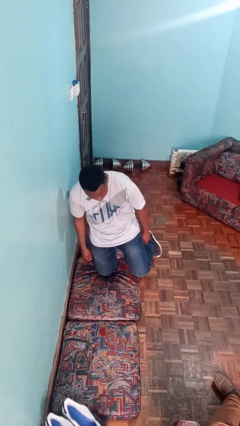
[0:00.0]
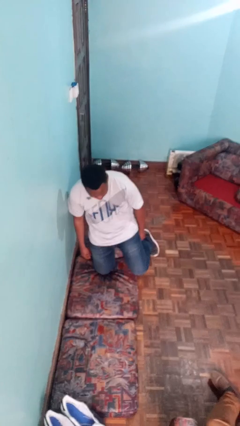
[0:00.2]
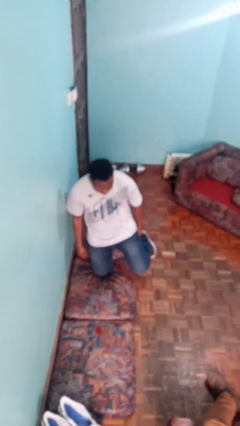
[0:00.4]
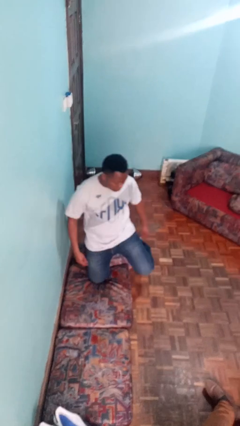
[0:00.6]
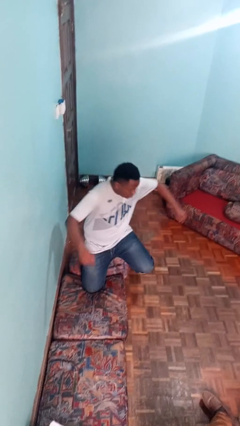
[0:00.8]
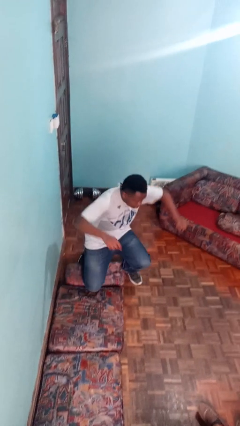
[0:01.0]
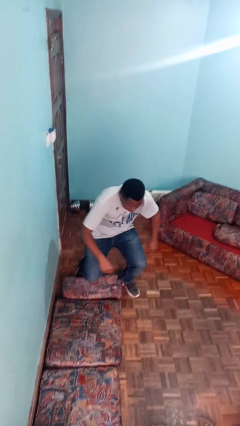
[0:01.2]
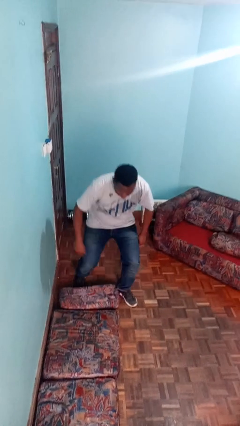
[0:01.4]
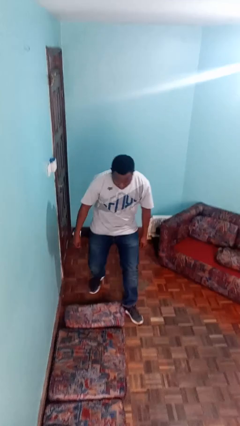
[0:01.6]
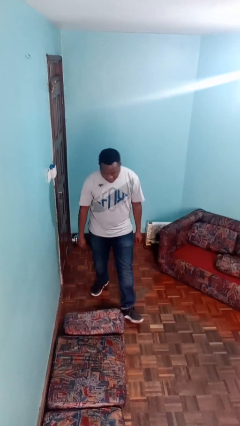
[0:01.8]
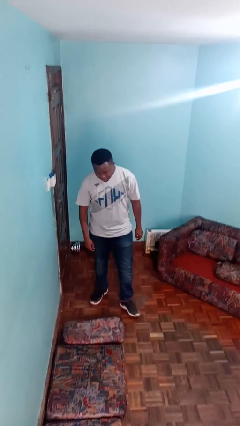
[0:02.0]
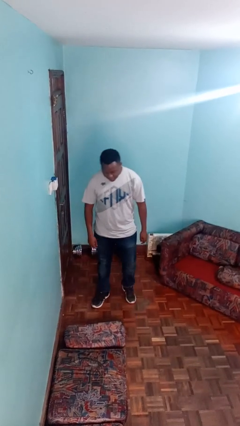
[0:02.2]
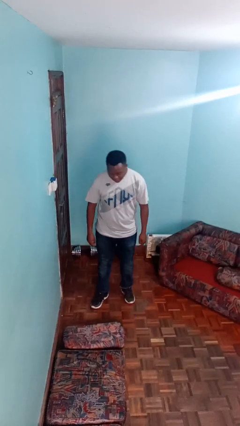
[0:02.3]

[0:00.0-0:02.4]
person stands up from floor

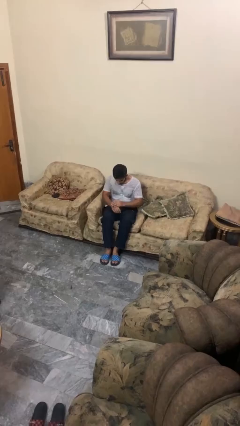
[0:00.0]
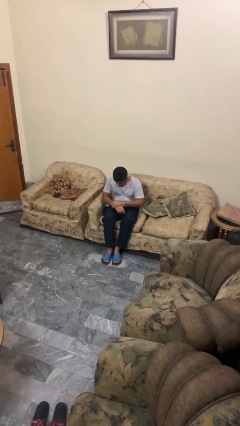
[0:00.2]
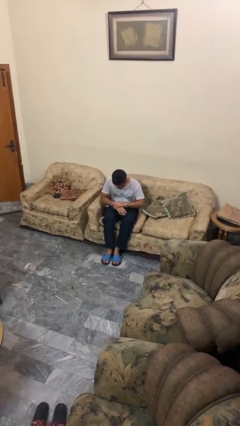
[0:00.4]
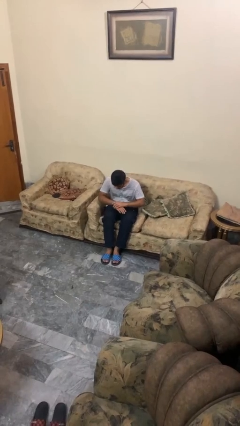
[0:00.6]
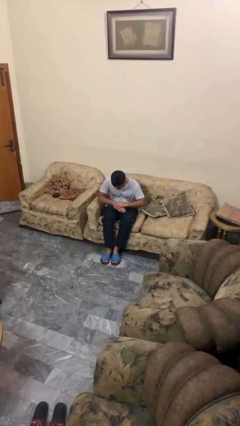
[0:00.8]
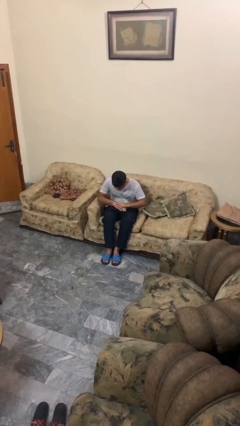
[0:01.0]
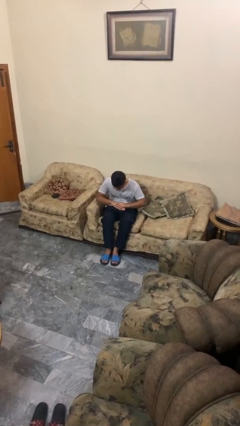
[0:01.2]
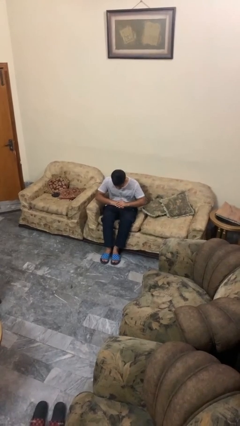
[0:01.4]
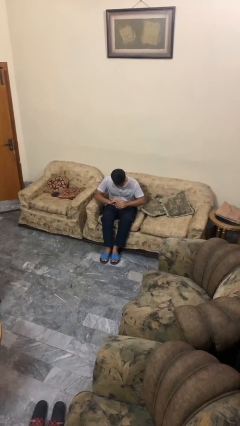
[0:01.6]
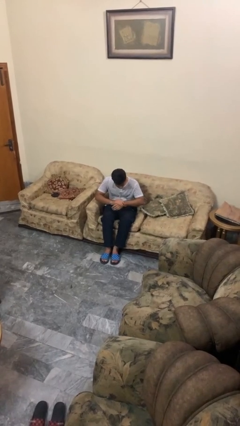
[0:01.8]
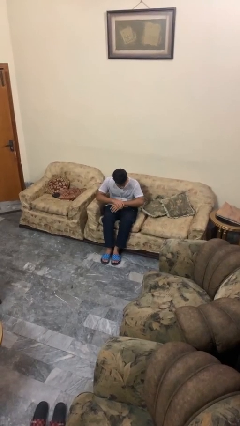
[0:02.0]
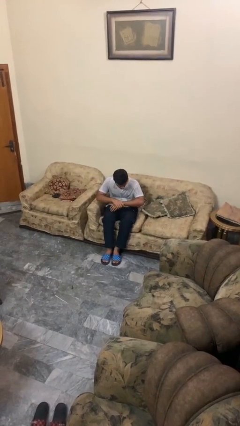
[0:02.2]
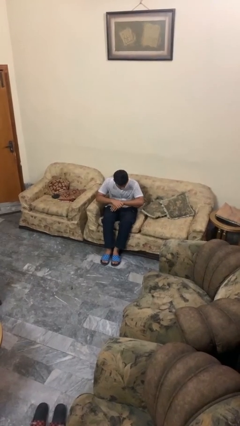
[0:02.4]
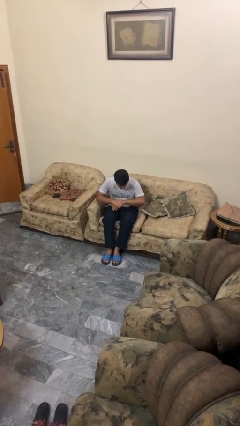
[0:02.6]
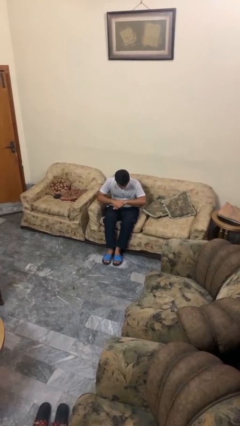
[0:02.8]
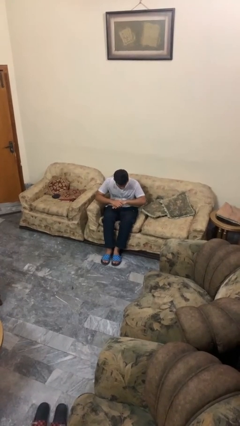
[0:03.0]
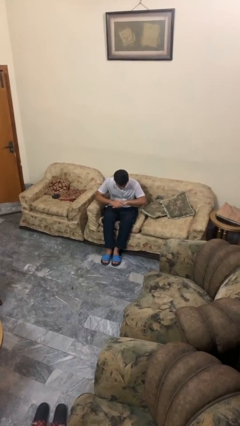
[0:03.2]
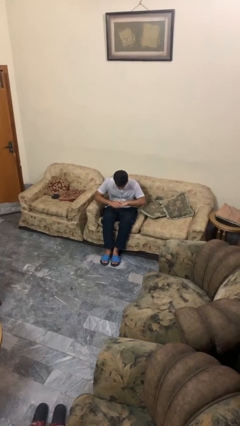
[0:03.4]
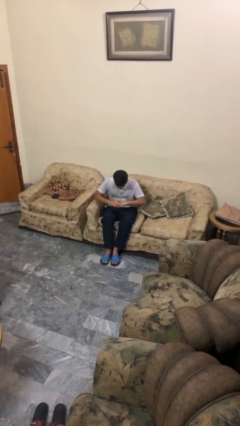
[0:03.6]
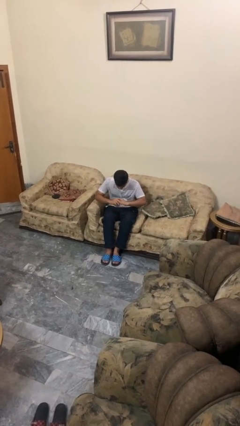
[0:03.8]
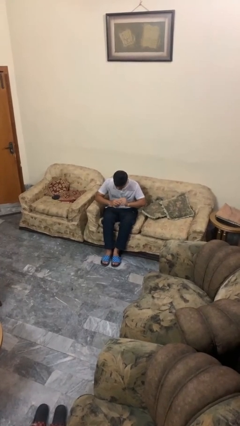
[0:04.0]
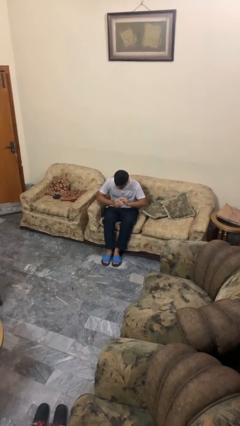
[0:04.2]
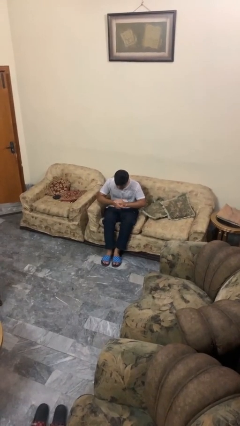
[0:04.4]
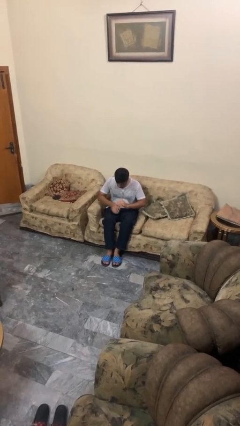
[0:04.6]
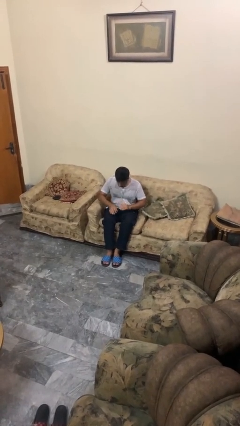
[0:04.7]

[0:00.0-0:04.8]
person looks at hands in lap

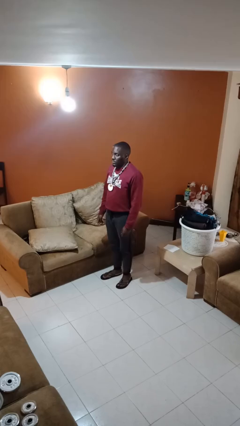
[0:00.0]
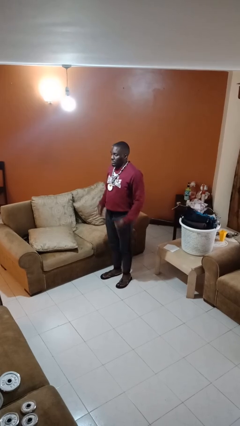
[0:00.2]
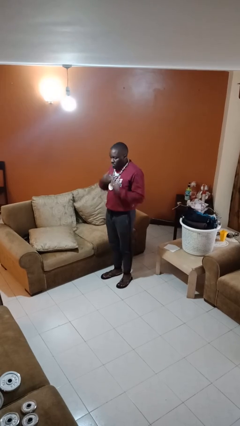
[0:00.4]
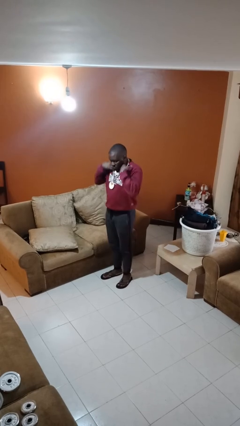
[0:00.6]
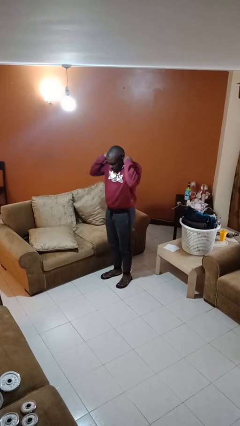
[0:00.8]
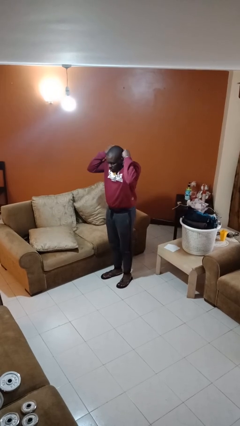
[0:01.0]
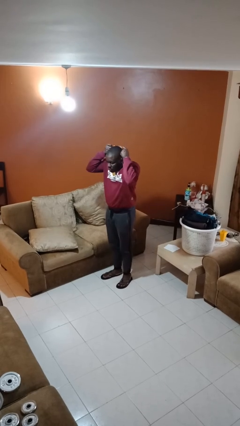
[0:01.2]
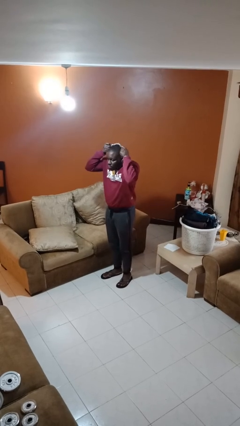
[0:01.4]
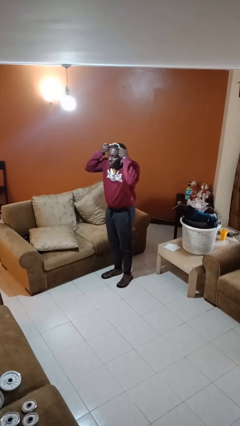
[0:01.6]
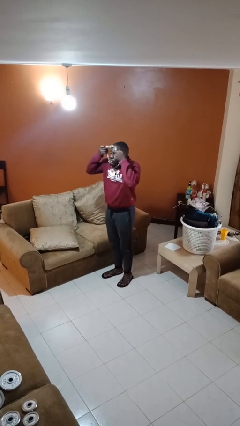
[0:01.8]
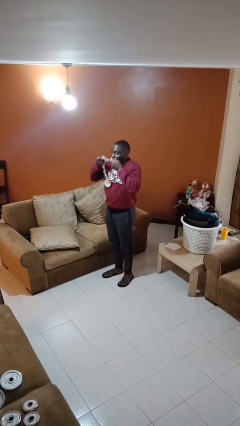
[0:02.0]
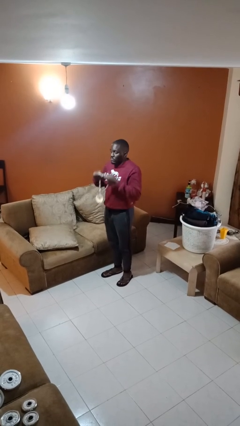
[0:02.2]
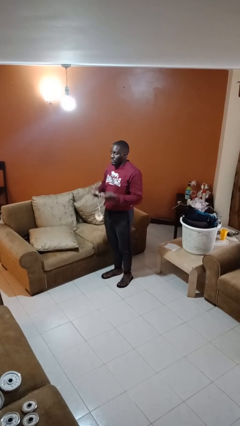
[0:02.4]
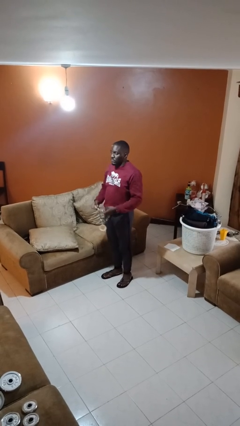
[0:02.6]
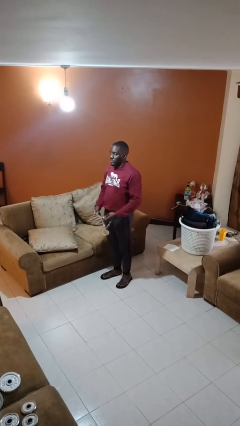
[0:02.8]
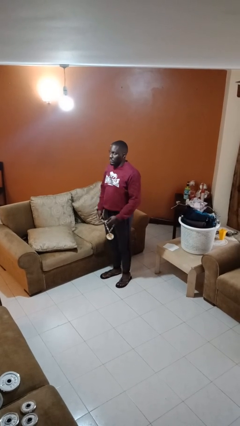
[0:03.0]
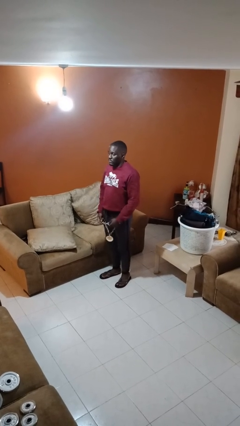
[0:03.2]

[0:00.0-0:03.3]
person takes off necklace

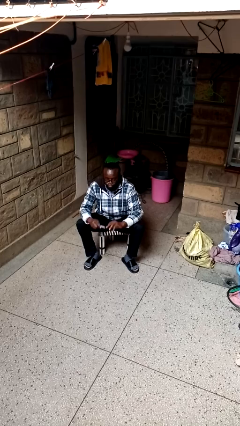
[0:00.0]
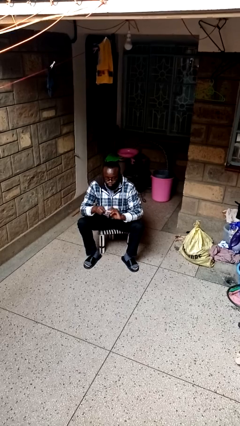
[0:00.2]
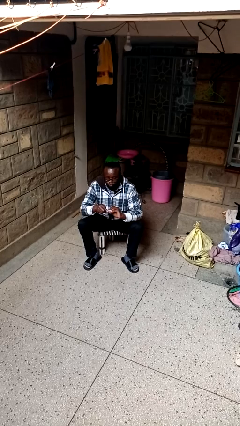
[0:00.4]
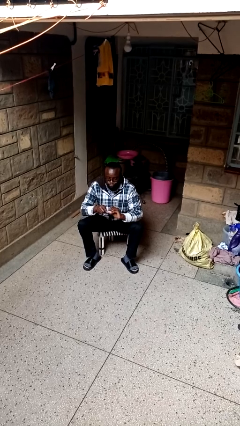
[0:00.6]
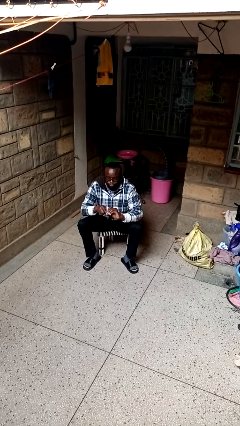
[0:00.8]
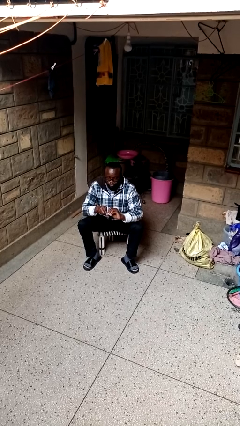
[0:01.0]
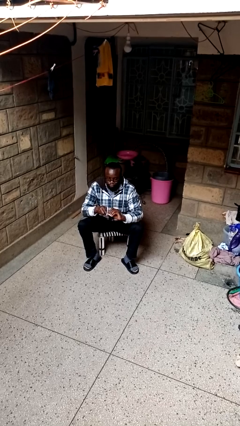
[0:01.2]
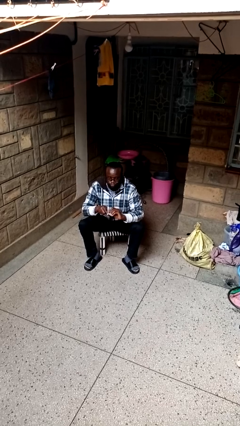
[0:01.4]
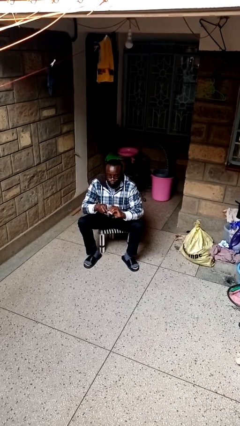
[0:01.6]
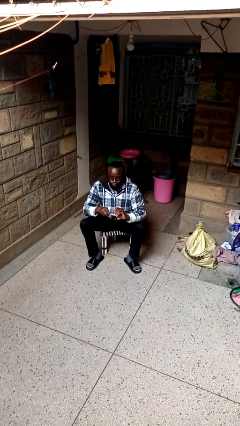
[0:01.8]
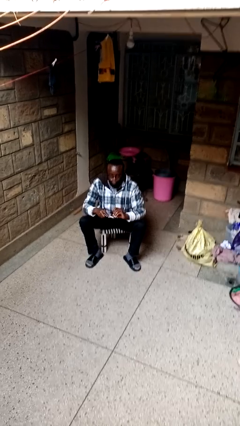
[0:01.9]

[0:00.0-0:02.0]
person files fingernails

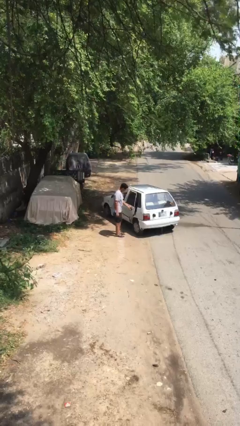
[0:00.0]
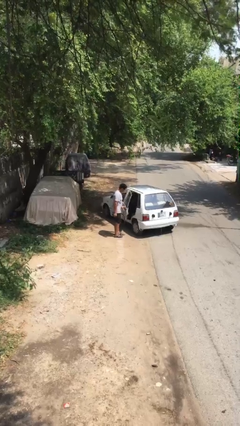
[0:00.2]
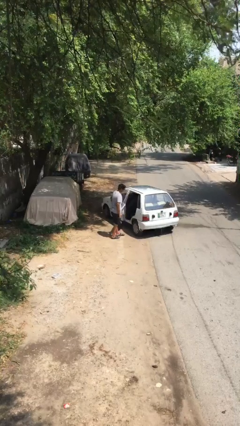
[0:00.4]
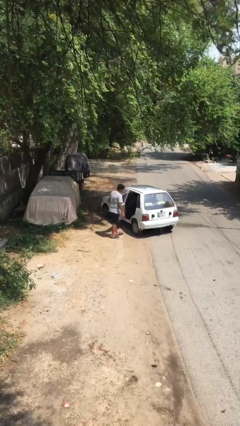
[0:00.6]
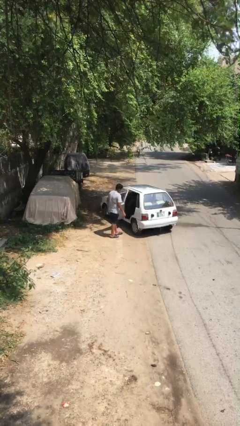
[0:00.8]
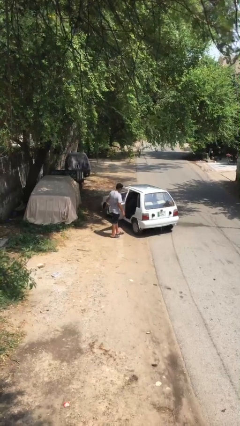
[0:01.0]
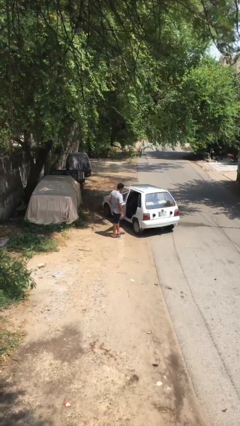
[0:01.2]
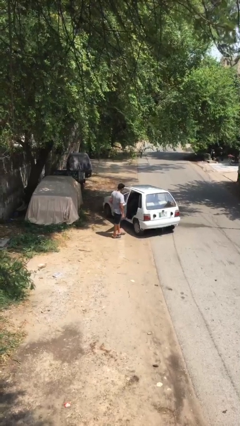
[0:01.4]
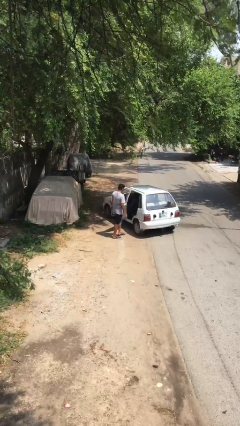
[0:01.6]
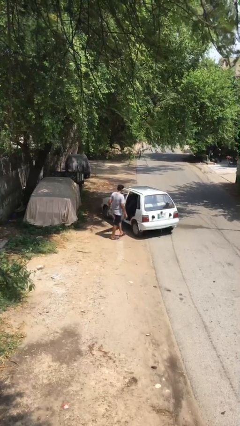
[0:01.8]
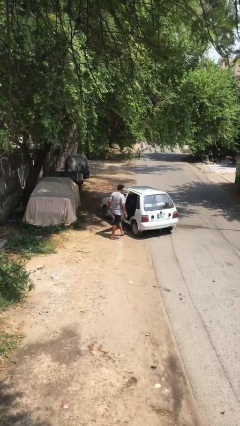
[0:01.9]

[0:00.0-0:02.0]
person opens car door

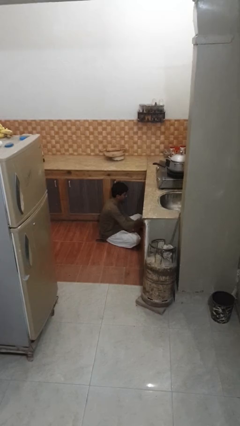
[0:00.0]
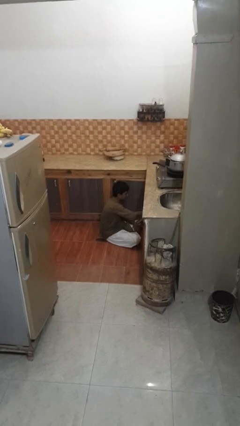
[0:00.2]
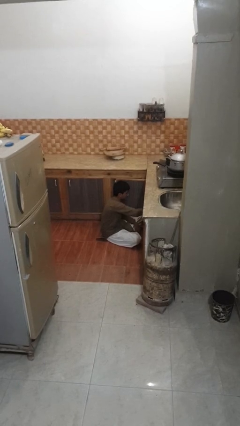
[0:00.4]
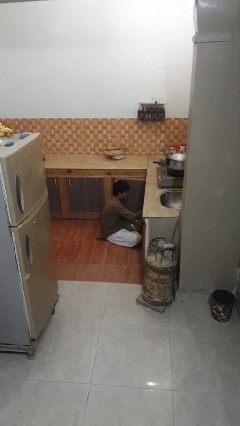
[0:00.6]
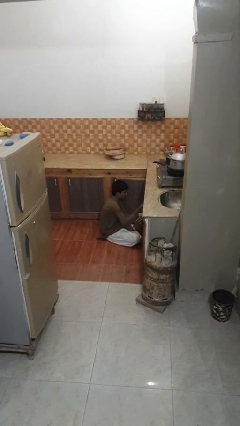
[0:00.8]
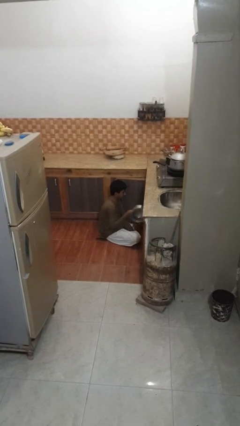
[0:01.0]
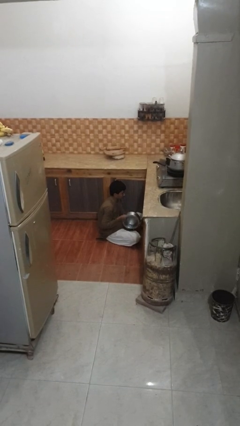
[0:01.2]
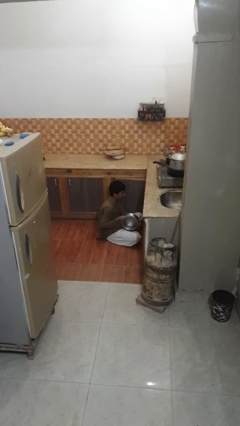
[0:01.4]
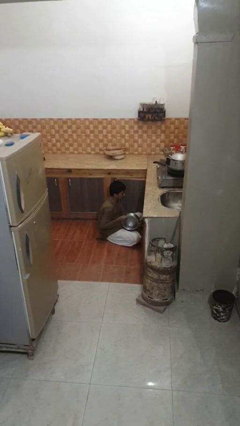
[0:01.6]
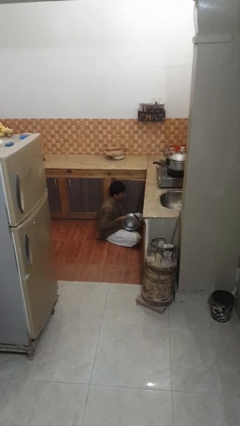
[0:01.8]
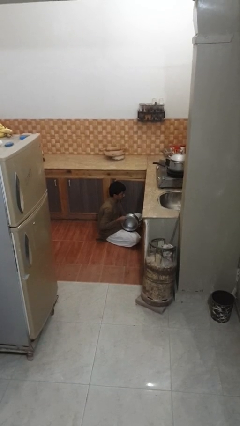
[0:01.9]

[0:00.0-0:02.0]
person takes object from kitchen drawer

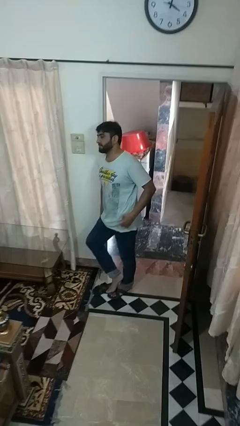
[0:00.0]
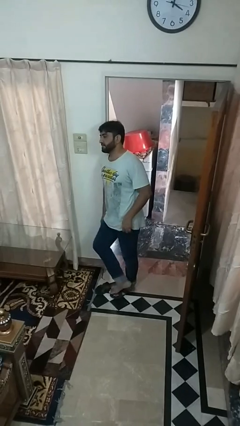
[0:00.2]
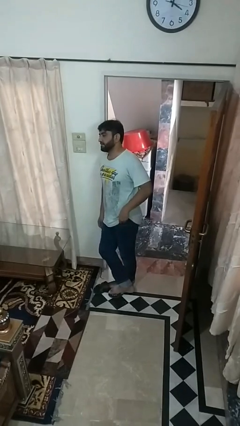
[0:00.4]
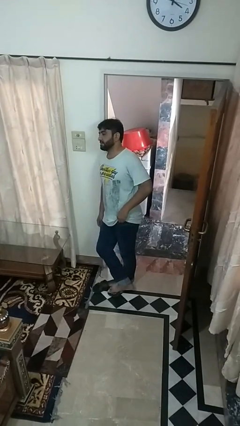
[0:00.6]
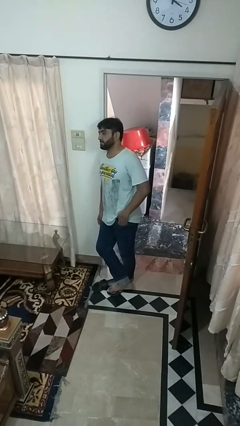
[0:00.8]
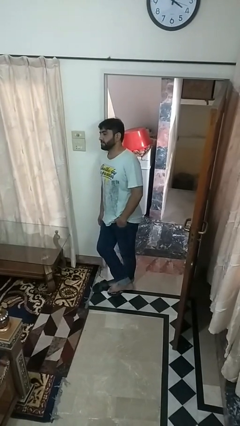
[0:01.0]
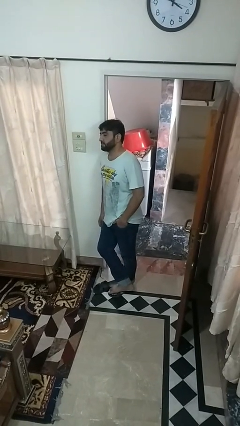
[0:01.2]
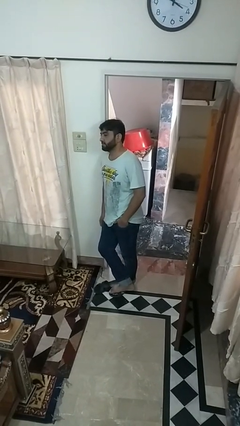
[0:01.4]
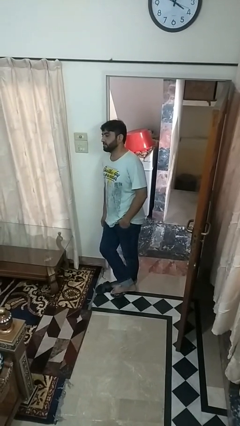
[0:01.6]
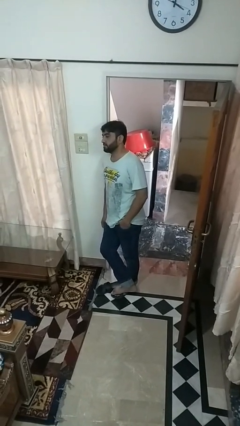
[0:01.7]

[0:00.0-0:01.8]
person puts hands in back pockets
